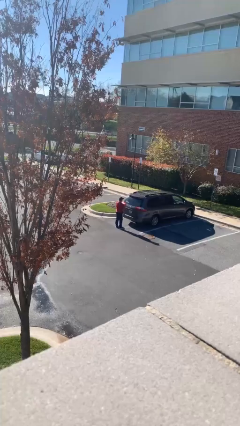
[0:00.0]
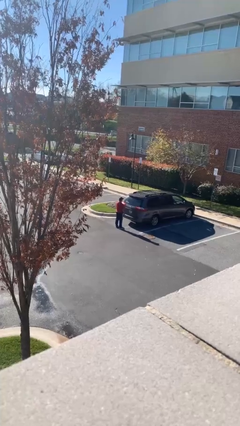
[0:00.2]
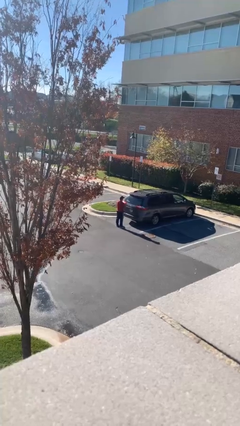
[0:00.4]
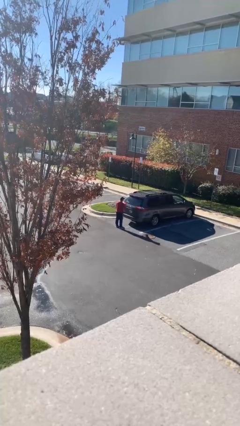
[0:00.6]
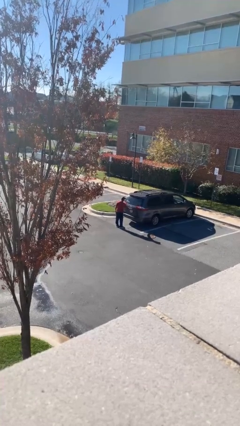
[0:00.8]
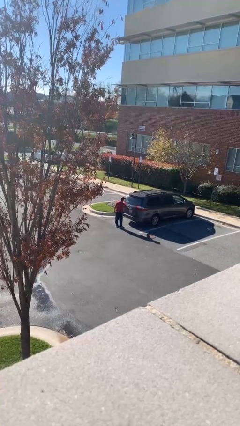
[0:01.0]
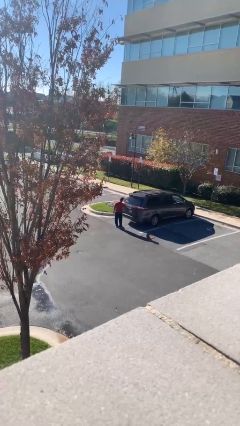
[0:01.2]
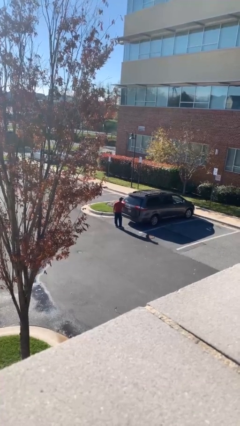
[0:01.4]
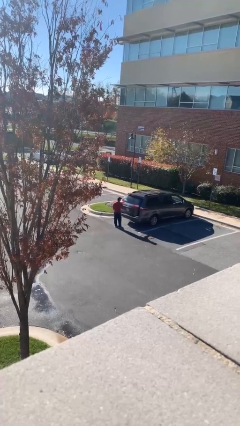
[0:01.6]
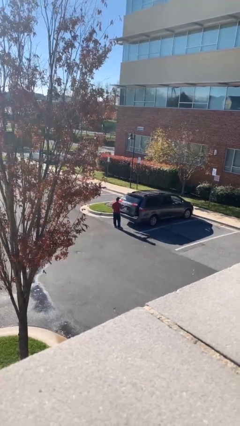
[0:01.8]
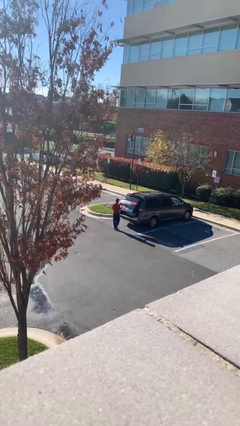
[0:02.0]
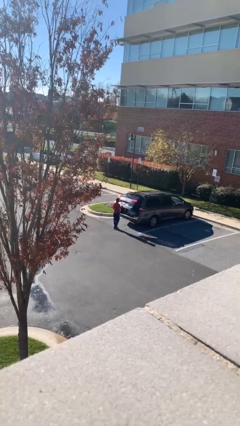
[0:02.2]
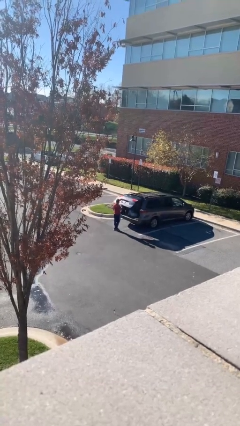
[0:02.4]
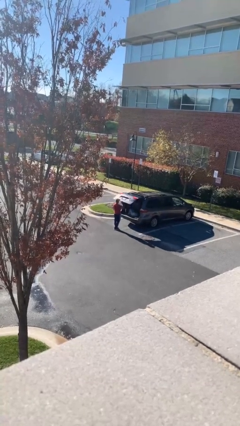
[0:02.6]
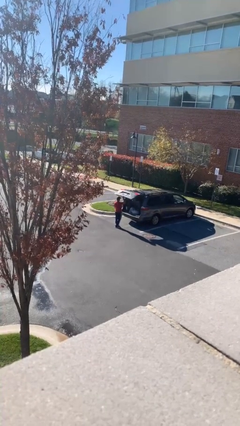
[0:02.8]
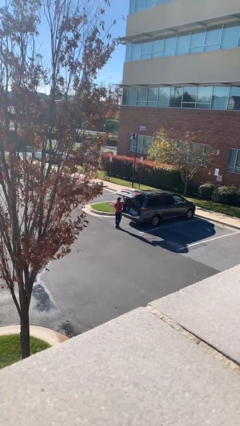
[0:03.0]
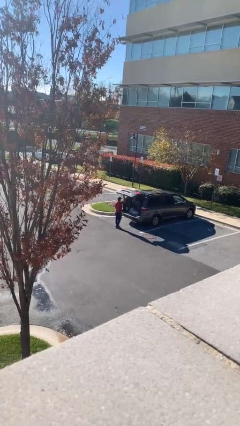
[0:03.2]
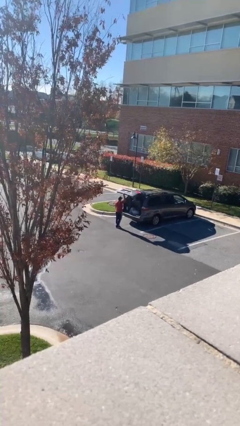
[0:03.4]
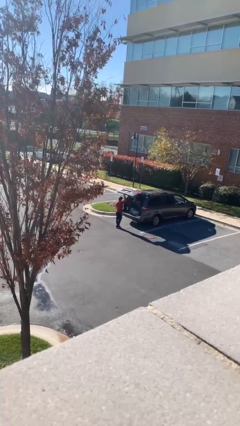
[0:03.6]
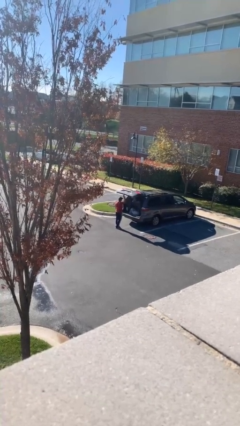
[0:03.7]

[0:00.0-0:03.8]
person opens car trunk

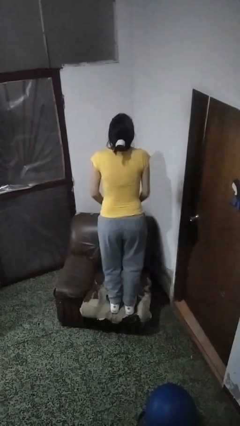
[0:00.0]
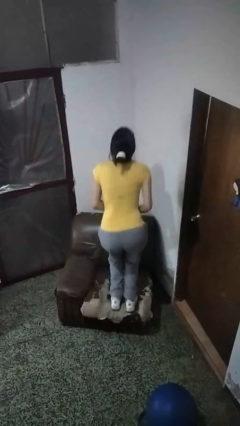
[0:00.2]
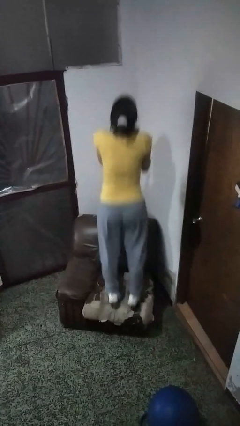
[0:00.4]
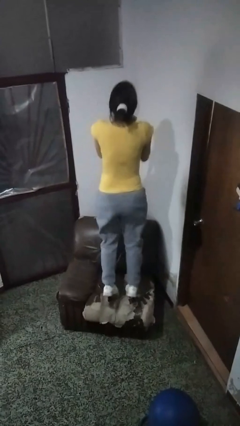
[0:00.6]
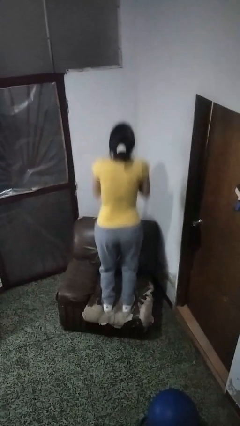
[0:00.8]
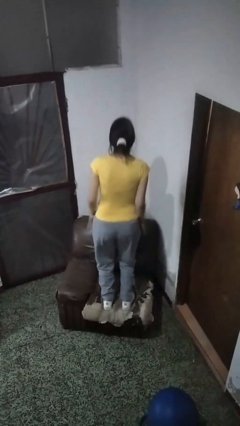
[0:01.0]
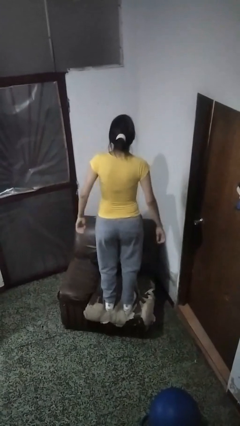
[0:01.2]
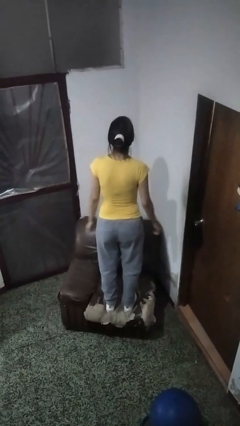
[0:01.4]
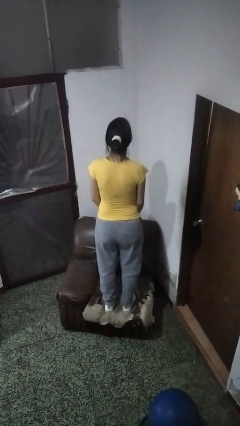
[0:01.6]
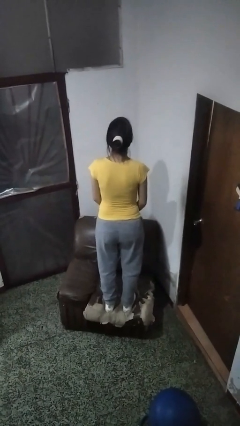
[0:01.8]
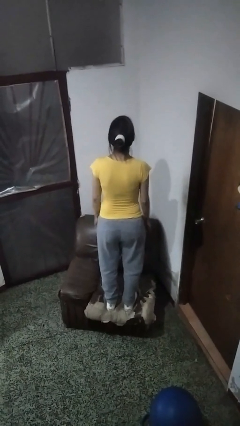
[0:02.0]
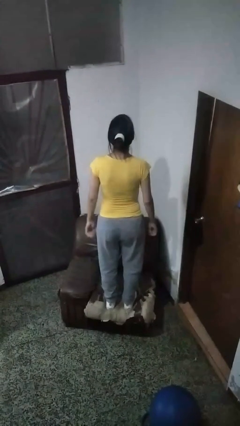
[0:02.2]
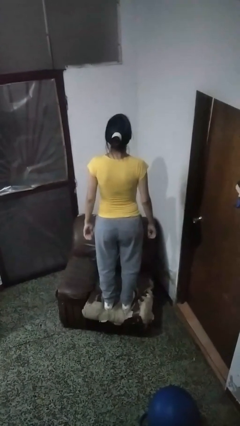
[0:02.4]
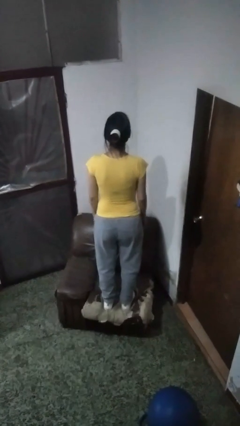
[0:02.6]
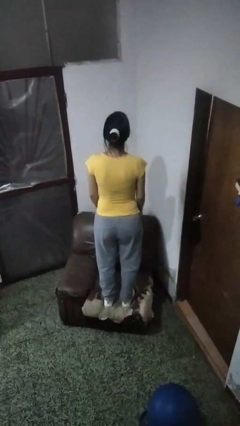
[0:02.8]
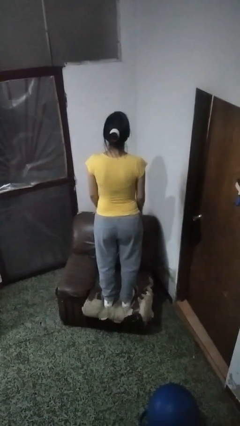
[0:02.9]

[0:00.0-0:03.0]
person jumps on couch

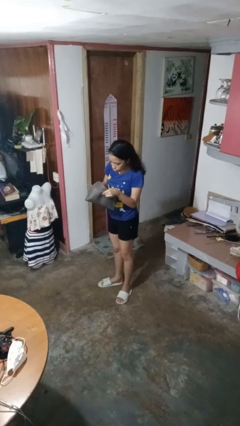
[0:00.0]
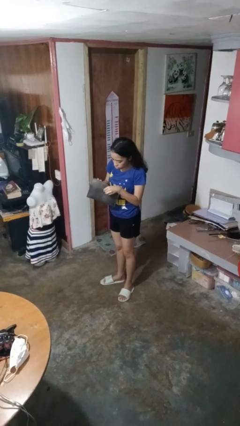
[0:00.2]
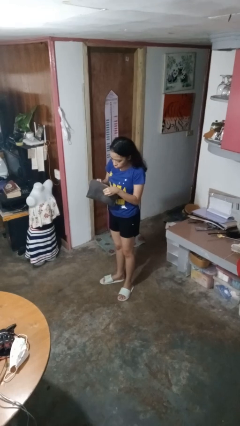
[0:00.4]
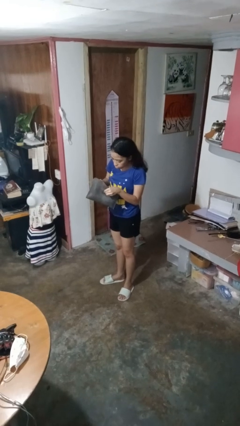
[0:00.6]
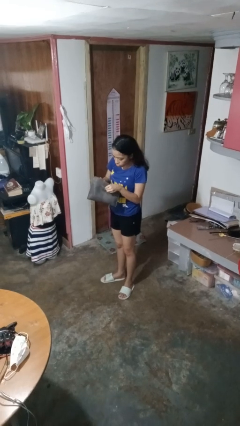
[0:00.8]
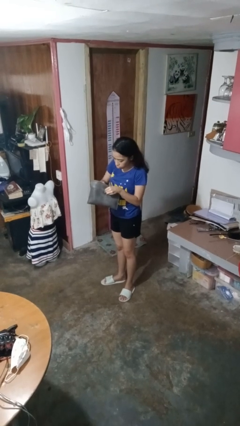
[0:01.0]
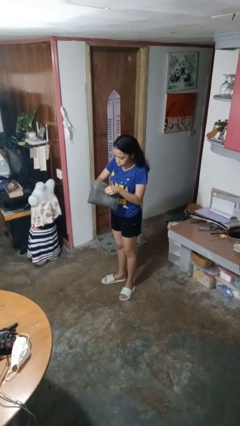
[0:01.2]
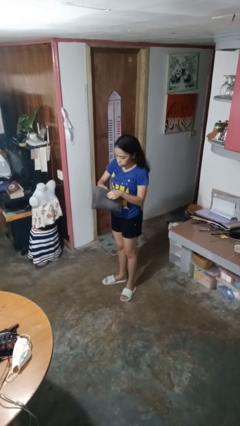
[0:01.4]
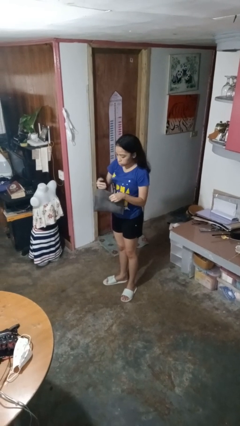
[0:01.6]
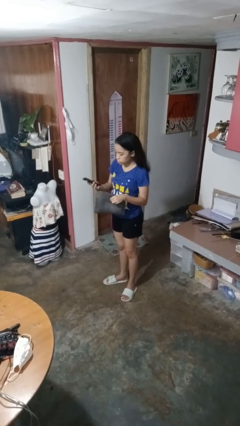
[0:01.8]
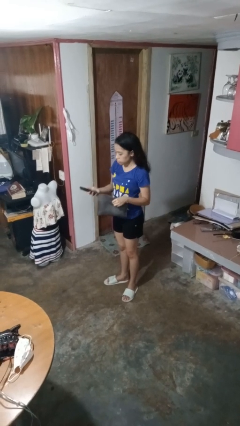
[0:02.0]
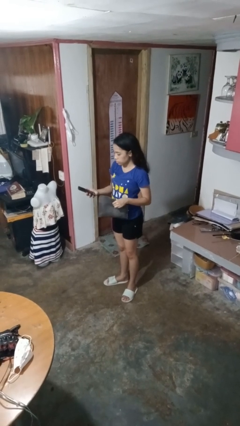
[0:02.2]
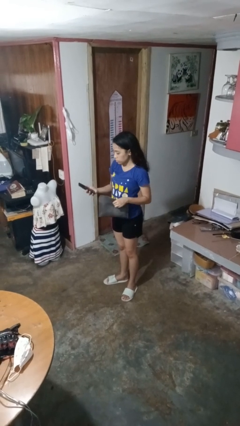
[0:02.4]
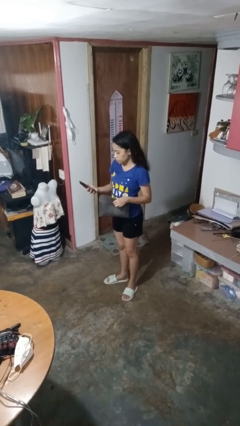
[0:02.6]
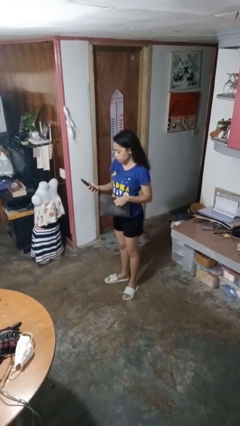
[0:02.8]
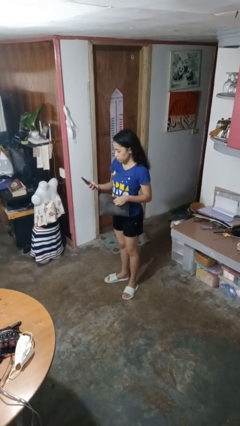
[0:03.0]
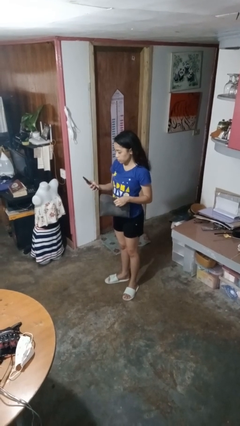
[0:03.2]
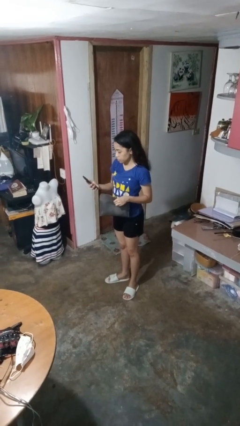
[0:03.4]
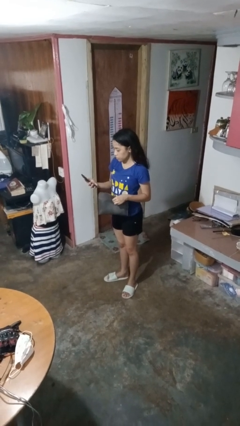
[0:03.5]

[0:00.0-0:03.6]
person takes object from purse

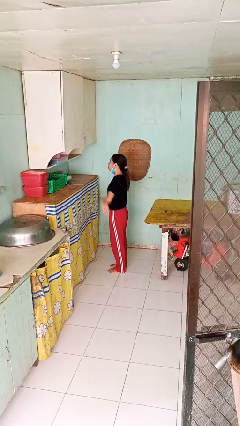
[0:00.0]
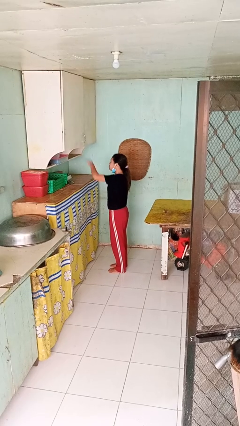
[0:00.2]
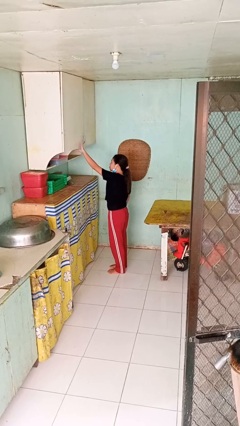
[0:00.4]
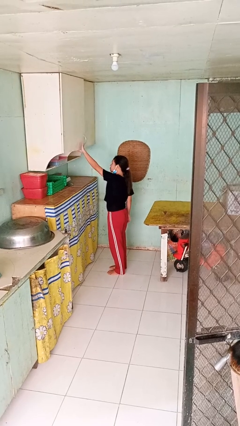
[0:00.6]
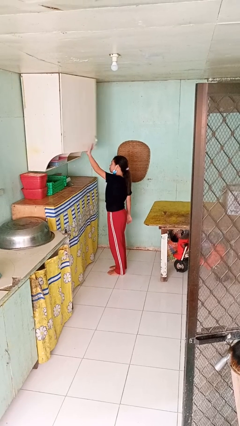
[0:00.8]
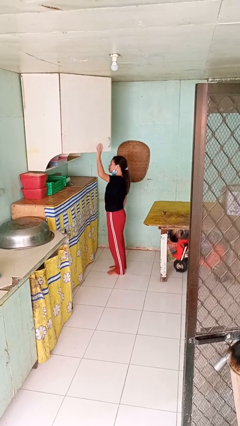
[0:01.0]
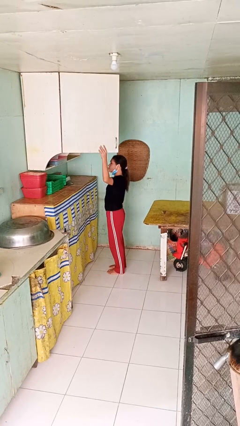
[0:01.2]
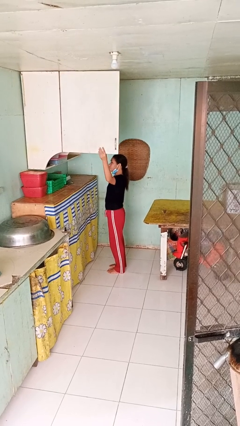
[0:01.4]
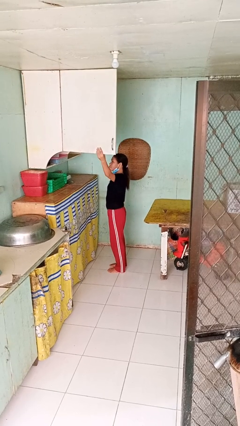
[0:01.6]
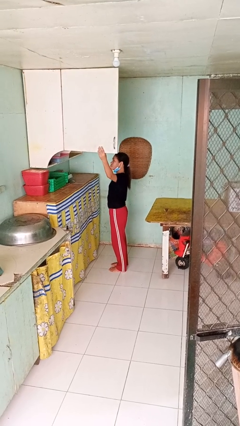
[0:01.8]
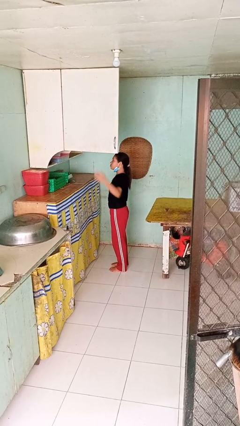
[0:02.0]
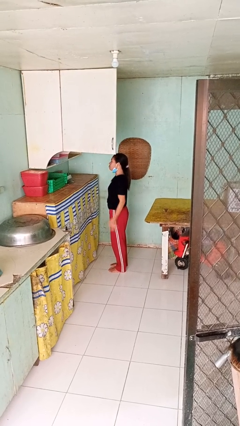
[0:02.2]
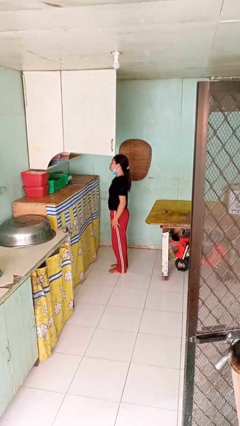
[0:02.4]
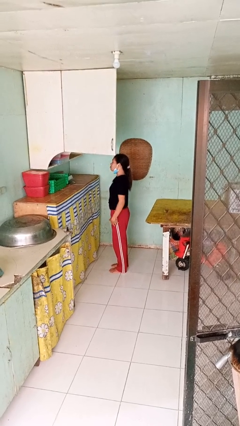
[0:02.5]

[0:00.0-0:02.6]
person opens cabinet

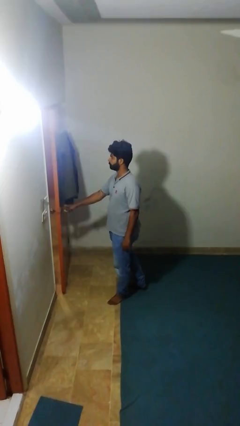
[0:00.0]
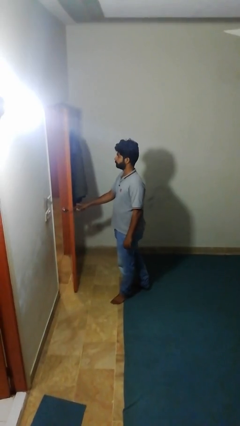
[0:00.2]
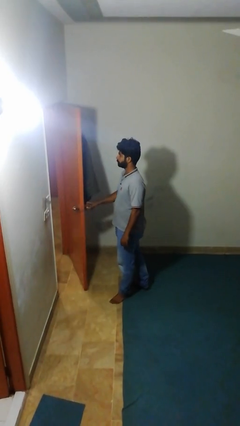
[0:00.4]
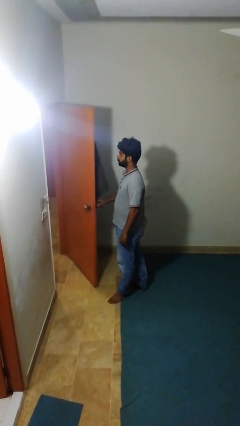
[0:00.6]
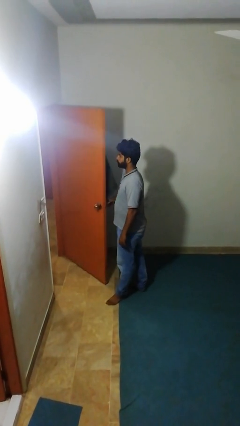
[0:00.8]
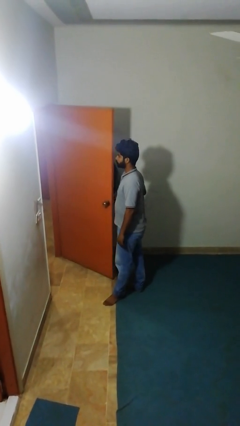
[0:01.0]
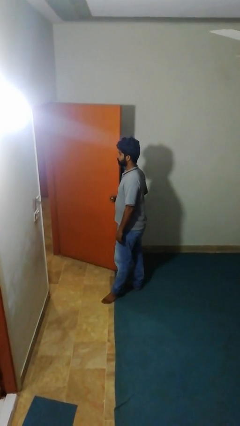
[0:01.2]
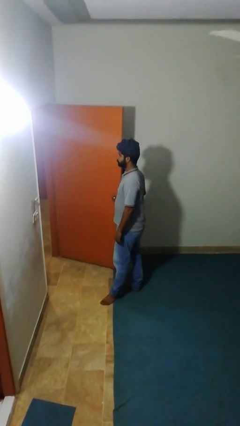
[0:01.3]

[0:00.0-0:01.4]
person opens facility door

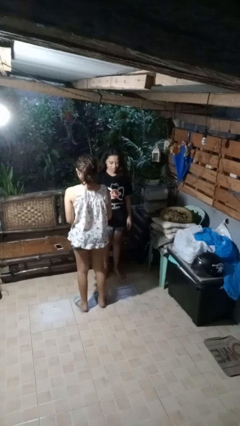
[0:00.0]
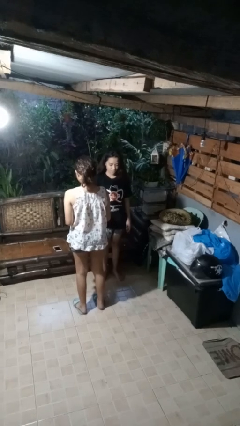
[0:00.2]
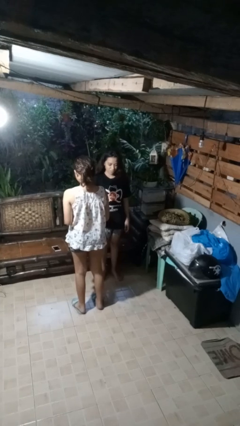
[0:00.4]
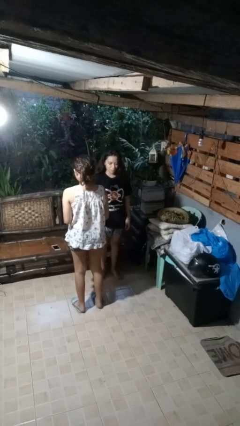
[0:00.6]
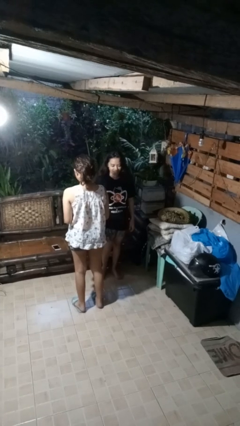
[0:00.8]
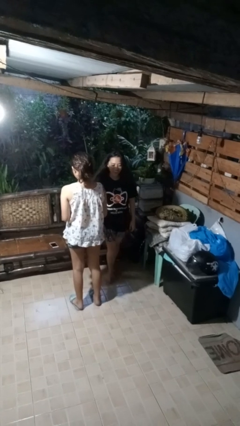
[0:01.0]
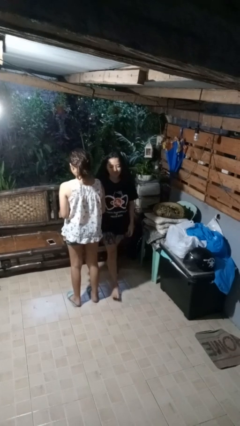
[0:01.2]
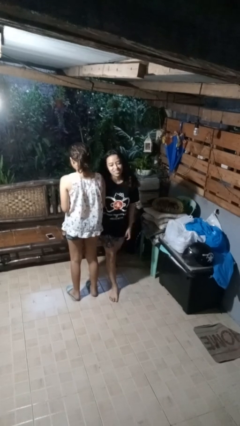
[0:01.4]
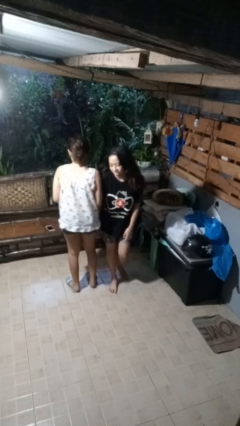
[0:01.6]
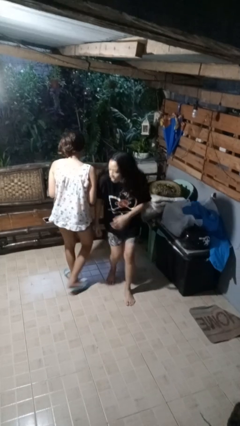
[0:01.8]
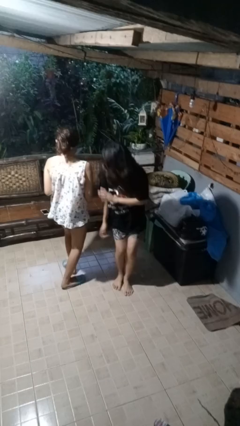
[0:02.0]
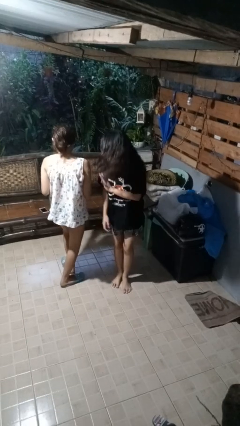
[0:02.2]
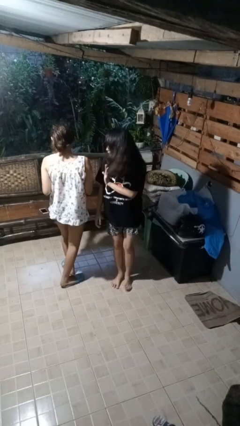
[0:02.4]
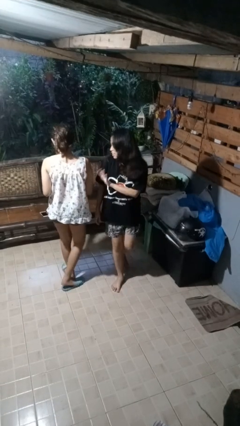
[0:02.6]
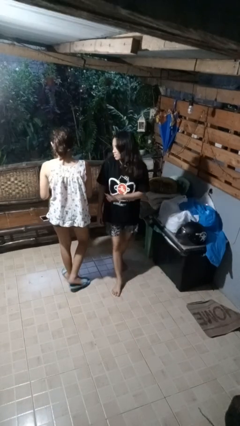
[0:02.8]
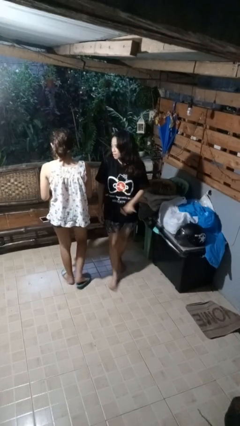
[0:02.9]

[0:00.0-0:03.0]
person bumps into person
